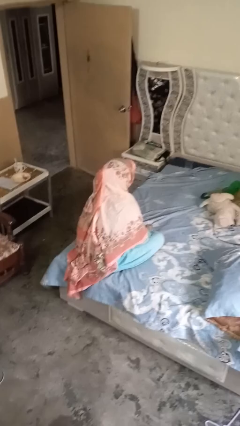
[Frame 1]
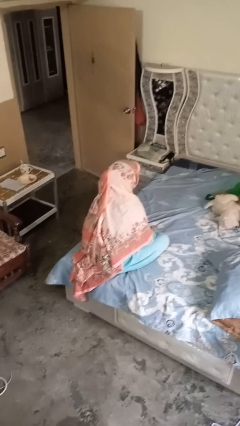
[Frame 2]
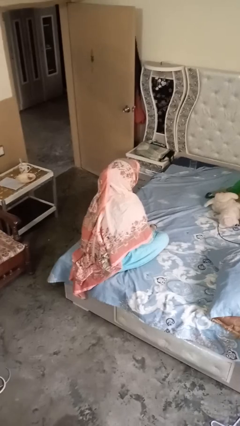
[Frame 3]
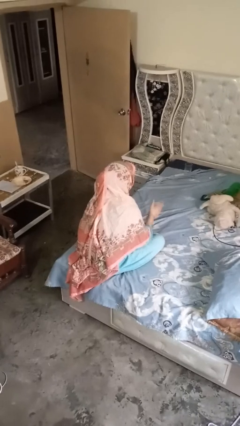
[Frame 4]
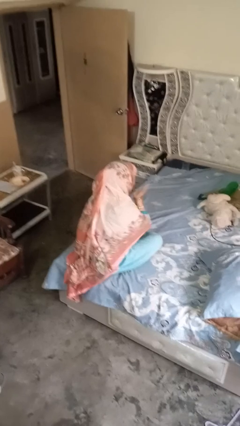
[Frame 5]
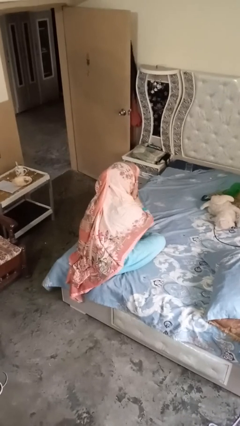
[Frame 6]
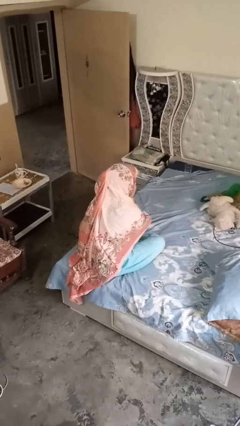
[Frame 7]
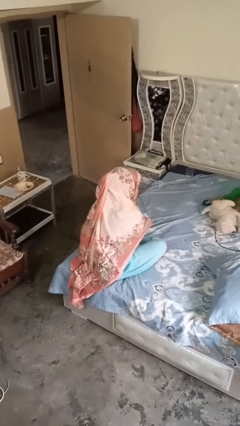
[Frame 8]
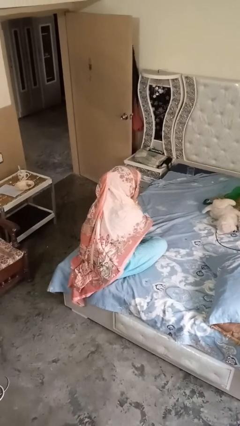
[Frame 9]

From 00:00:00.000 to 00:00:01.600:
person strokes chin

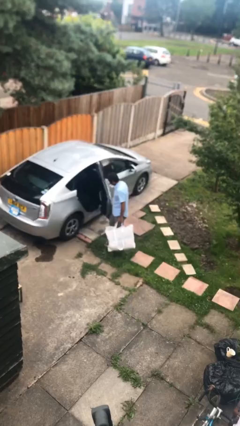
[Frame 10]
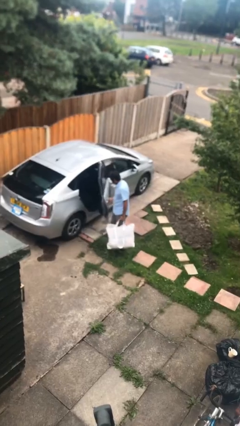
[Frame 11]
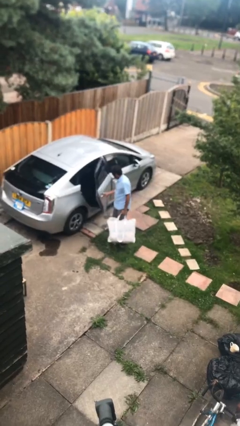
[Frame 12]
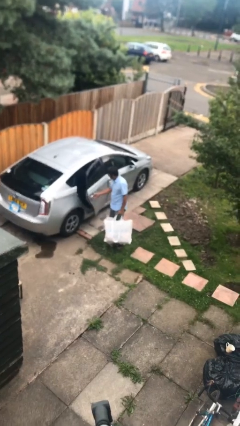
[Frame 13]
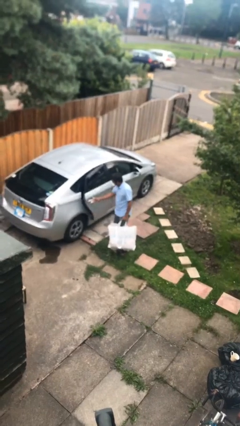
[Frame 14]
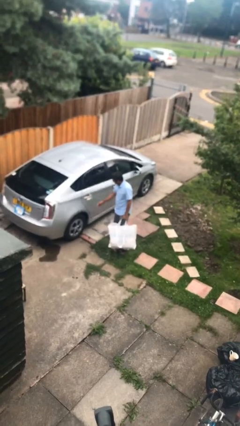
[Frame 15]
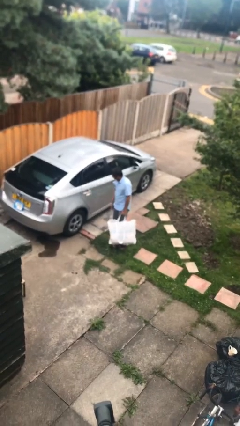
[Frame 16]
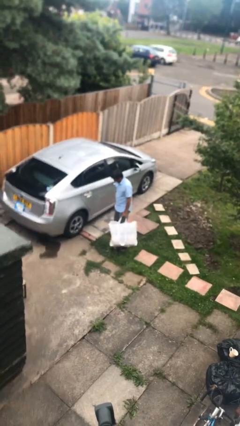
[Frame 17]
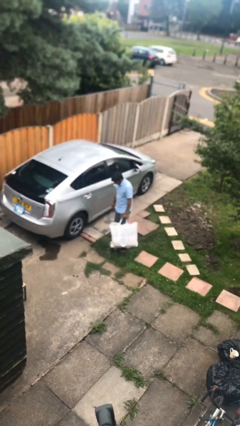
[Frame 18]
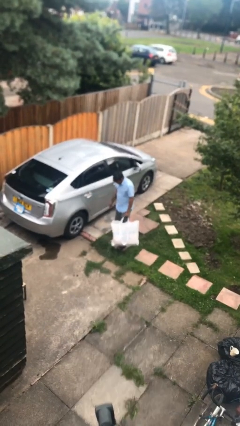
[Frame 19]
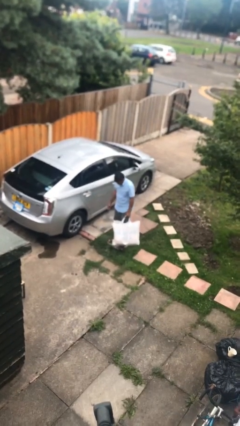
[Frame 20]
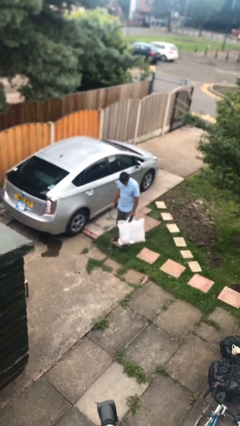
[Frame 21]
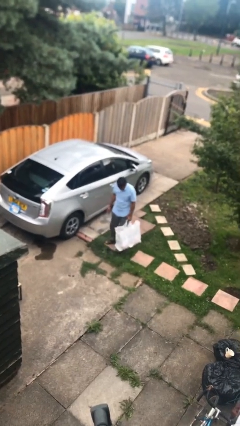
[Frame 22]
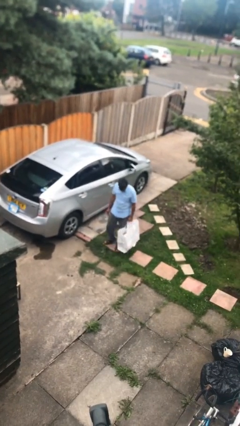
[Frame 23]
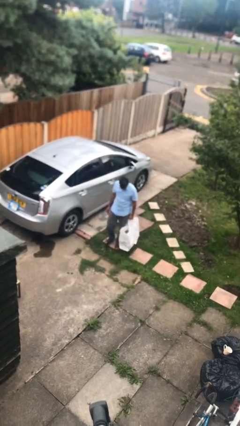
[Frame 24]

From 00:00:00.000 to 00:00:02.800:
person closes car door

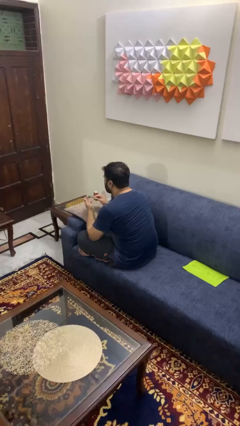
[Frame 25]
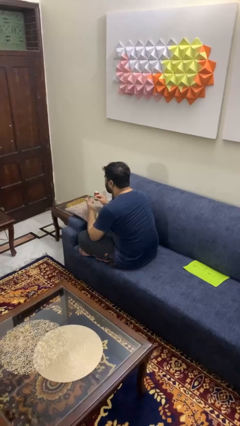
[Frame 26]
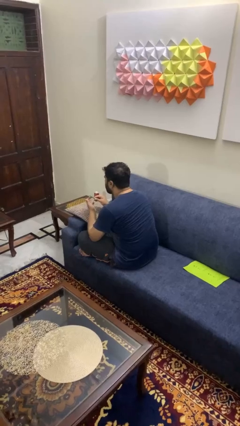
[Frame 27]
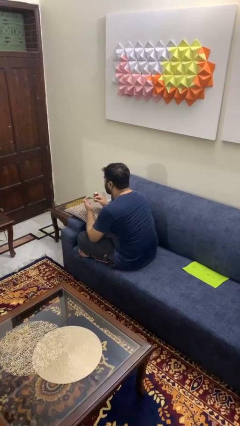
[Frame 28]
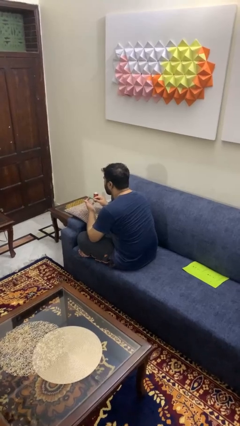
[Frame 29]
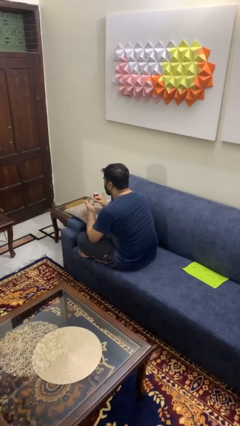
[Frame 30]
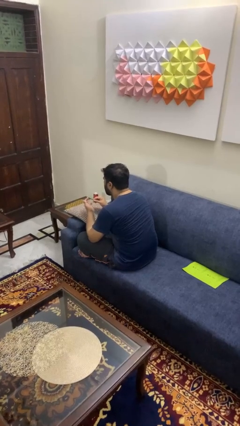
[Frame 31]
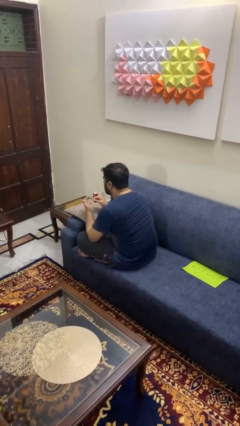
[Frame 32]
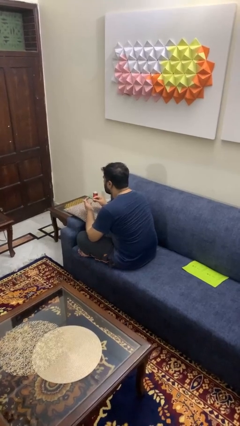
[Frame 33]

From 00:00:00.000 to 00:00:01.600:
person files fingernails

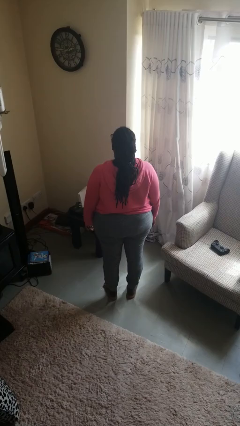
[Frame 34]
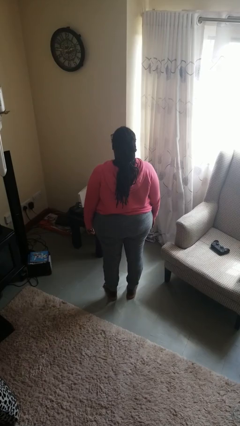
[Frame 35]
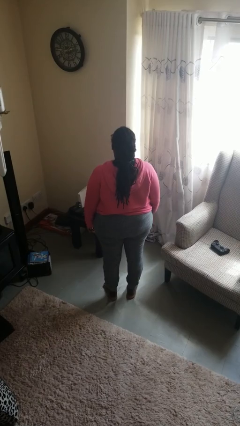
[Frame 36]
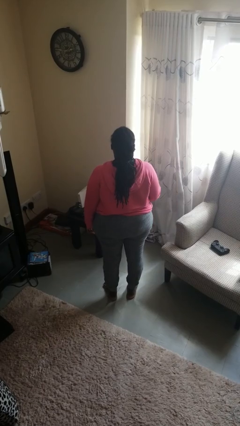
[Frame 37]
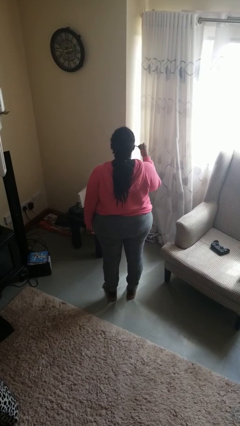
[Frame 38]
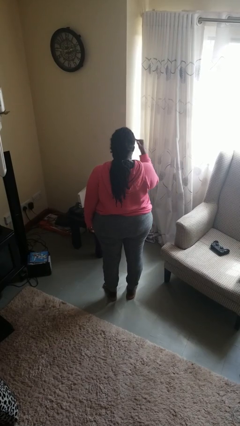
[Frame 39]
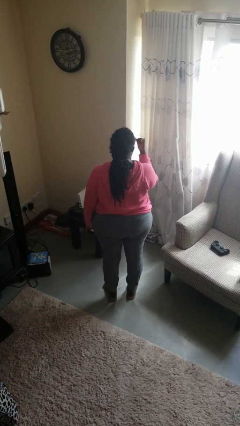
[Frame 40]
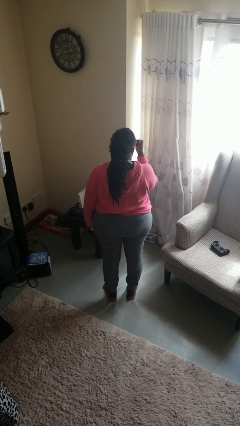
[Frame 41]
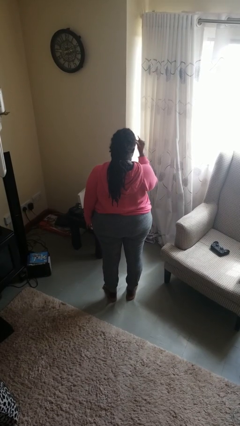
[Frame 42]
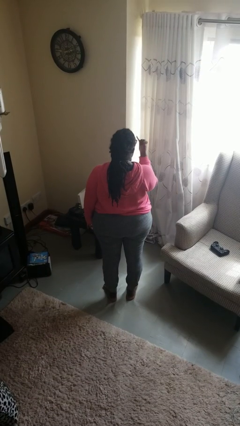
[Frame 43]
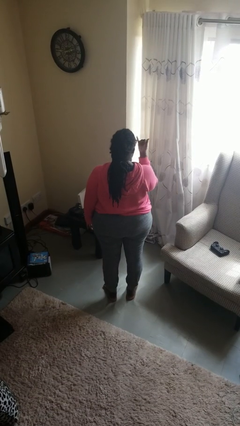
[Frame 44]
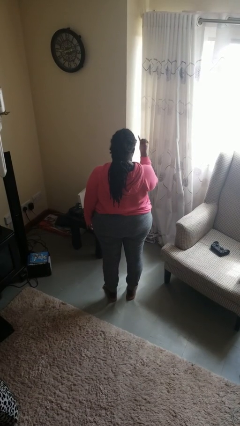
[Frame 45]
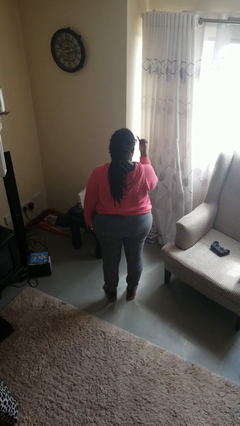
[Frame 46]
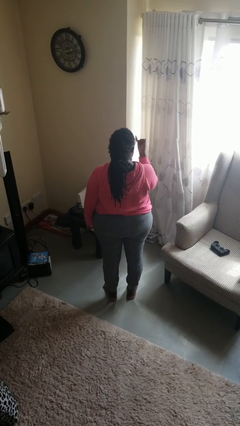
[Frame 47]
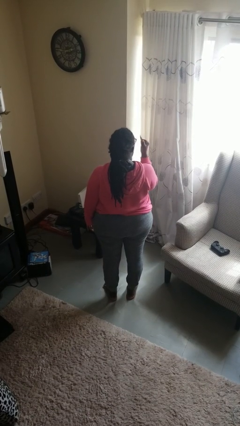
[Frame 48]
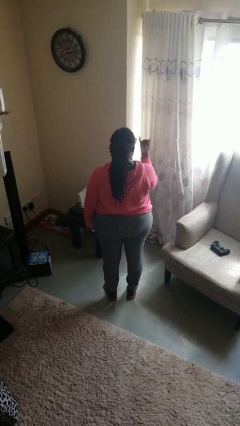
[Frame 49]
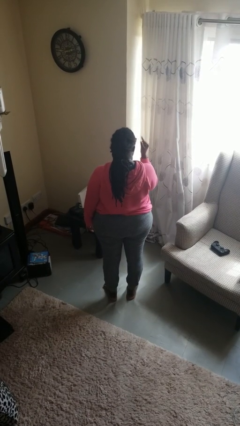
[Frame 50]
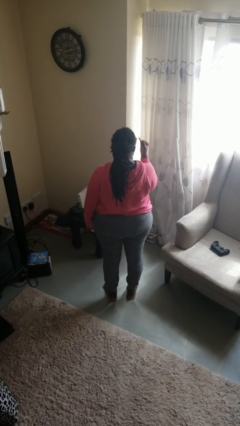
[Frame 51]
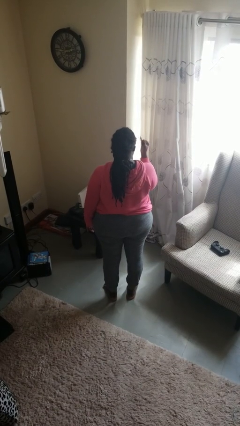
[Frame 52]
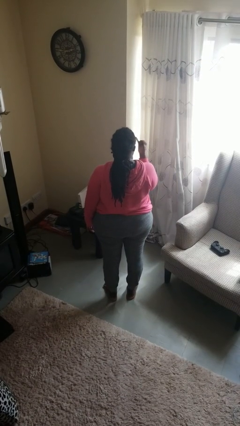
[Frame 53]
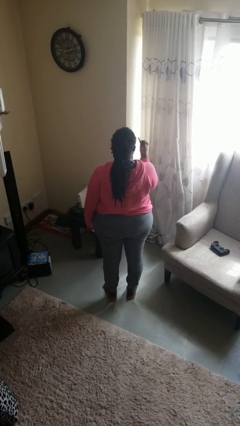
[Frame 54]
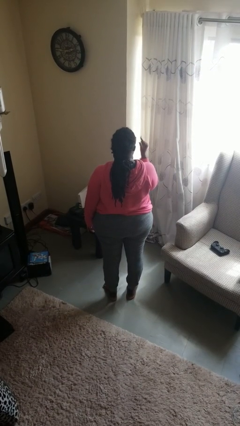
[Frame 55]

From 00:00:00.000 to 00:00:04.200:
person gestures hang loose

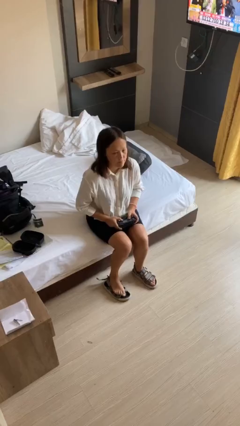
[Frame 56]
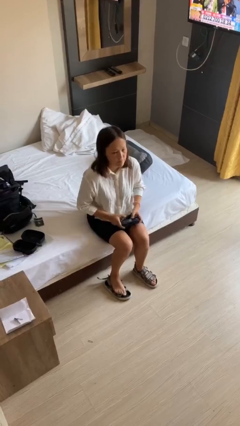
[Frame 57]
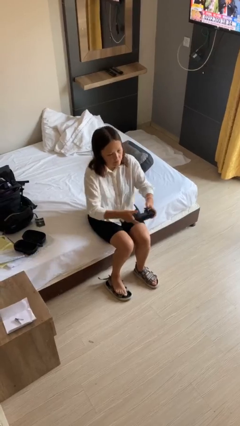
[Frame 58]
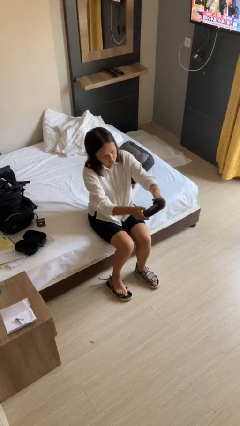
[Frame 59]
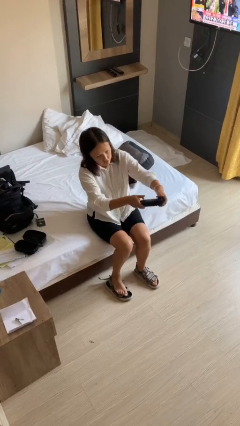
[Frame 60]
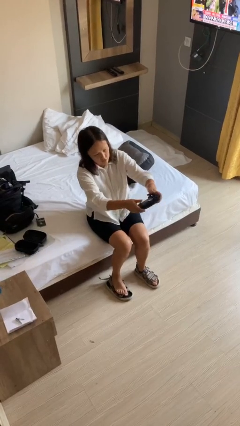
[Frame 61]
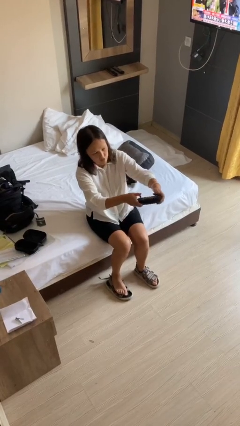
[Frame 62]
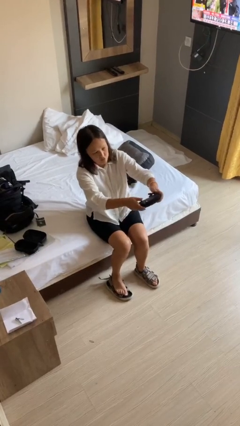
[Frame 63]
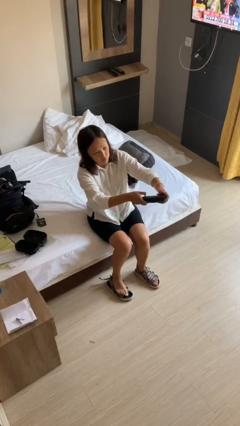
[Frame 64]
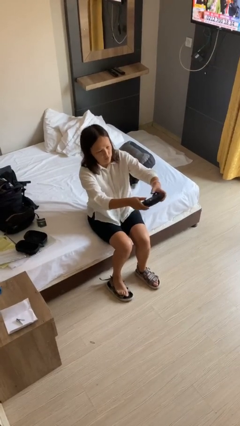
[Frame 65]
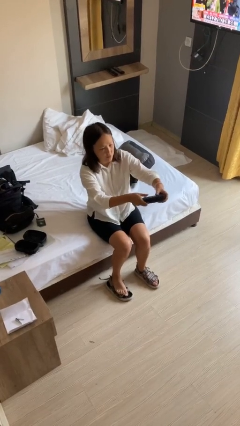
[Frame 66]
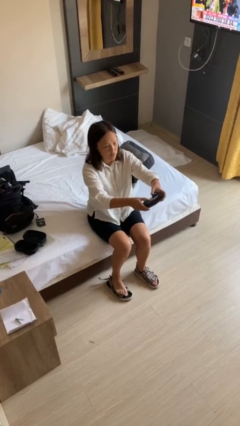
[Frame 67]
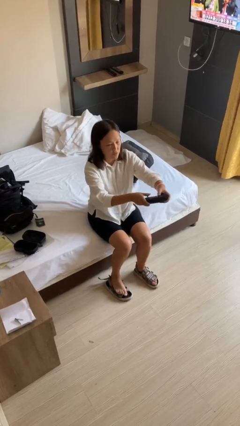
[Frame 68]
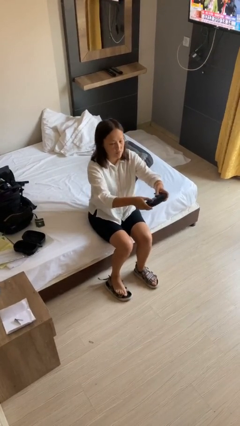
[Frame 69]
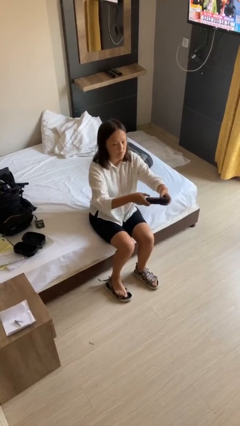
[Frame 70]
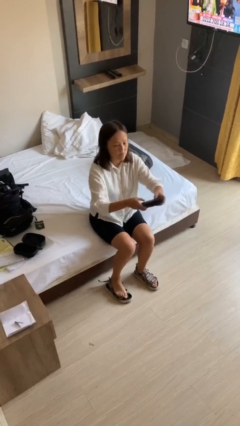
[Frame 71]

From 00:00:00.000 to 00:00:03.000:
person interacts with handheld game

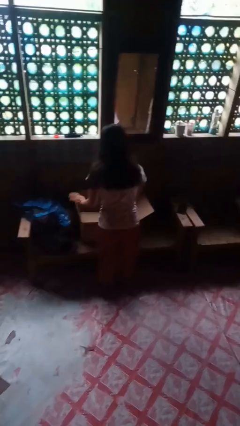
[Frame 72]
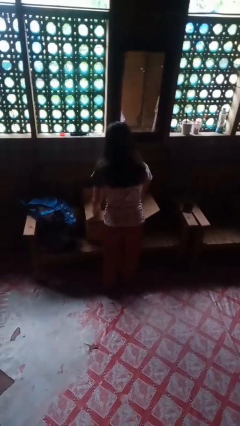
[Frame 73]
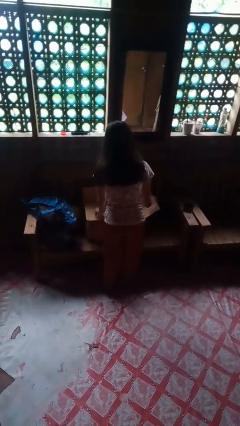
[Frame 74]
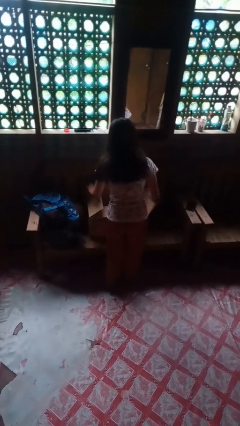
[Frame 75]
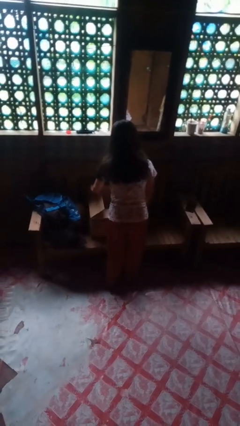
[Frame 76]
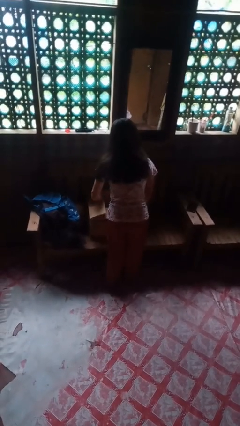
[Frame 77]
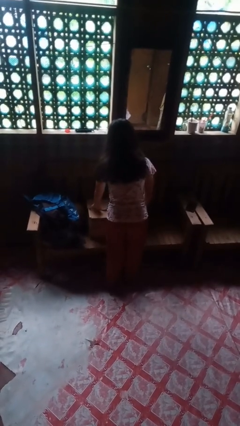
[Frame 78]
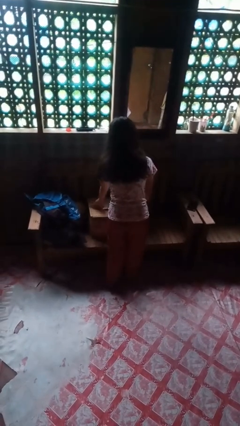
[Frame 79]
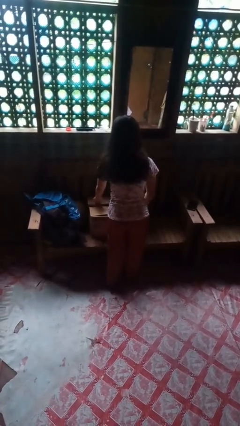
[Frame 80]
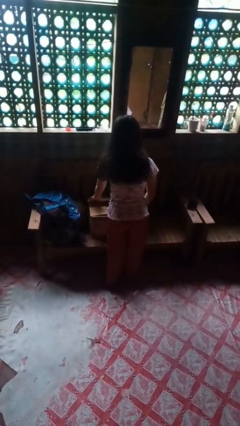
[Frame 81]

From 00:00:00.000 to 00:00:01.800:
person closes box

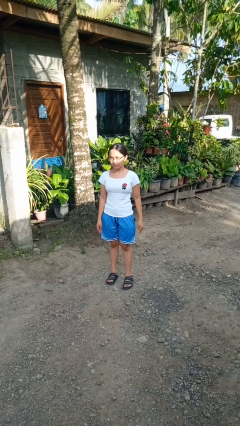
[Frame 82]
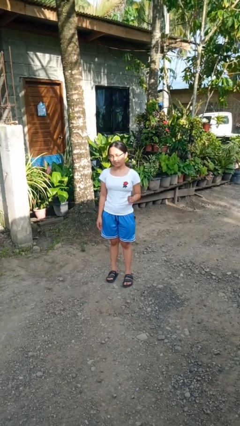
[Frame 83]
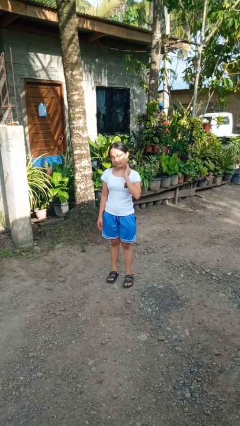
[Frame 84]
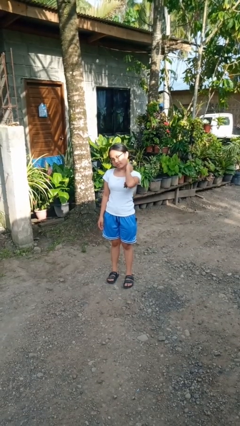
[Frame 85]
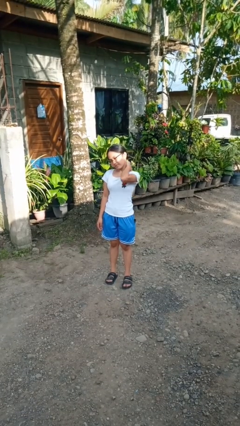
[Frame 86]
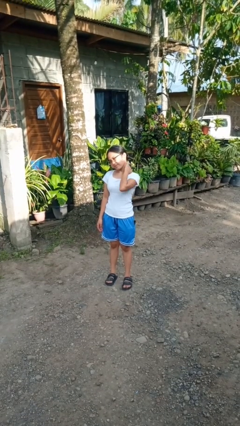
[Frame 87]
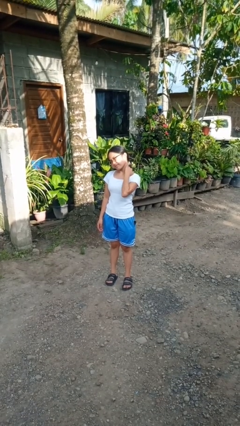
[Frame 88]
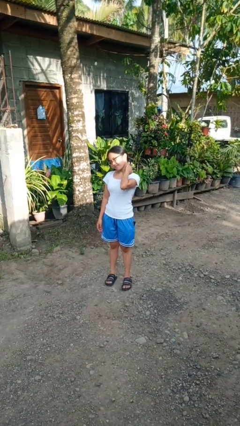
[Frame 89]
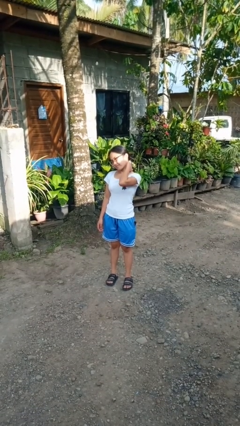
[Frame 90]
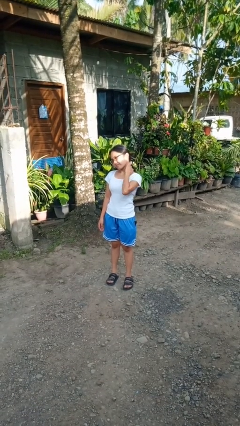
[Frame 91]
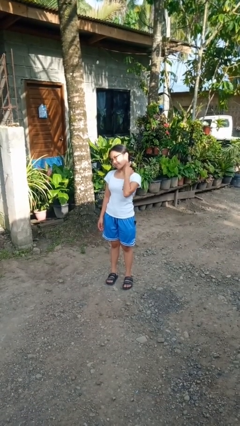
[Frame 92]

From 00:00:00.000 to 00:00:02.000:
person rubs neck

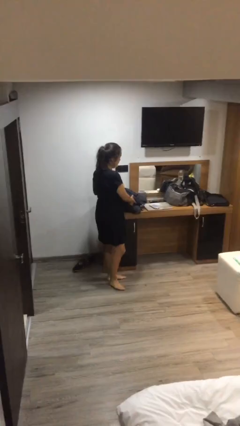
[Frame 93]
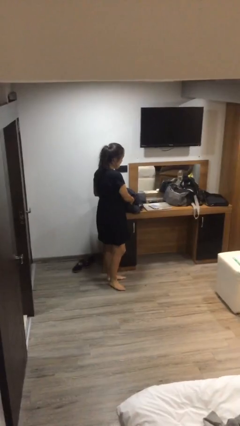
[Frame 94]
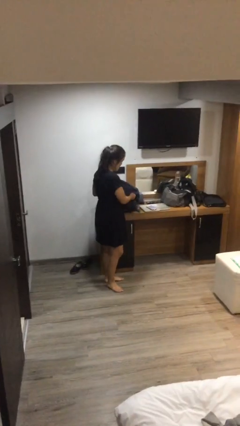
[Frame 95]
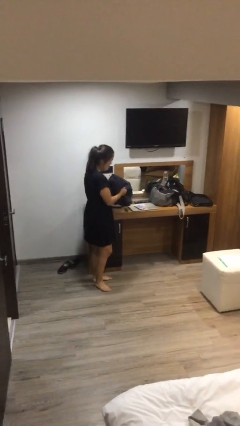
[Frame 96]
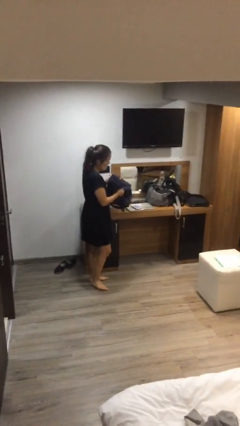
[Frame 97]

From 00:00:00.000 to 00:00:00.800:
person picks up object from table
